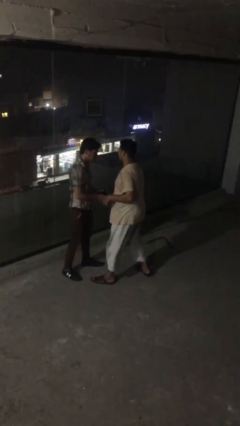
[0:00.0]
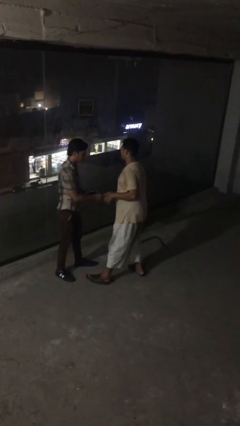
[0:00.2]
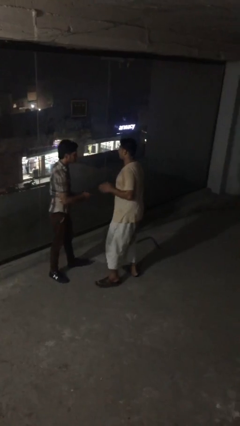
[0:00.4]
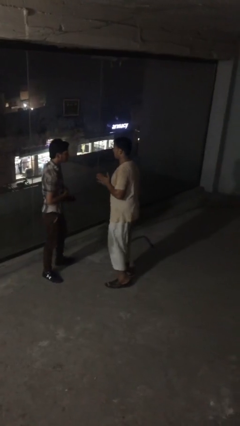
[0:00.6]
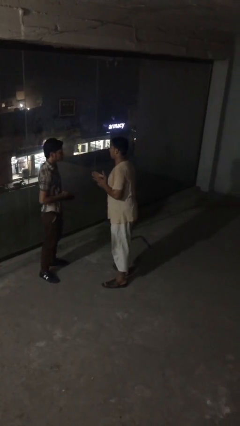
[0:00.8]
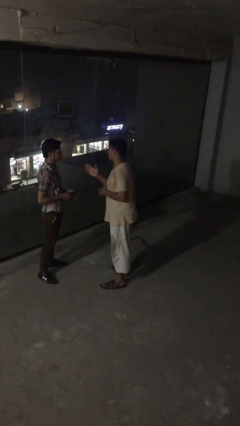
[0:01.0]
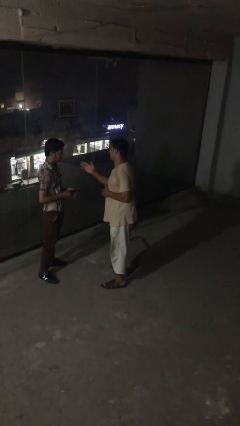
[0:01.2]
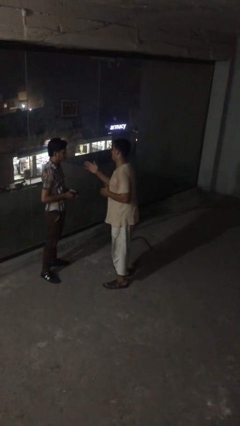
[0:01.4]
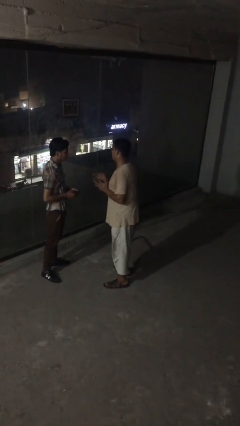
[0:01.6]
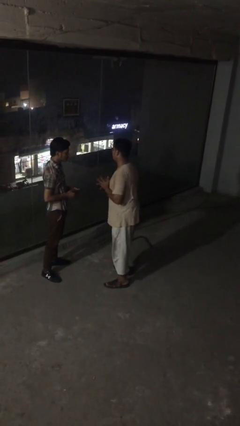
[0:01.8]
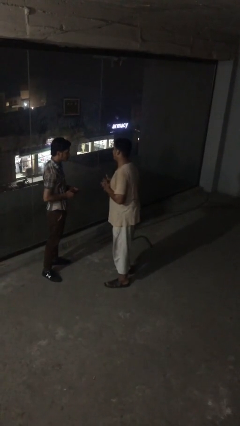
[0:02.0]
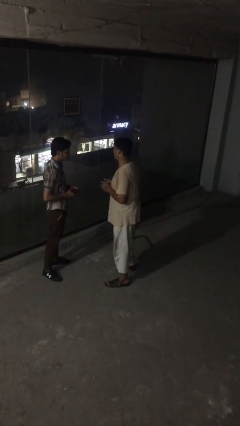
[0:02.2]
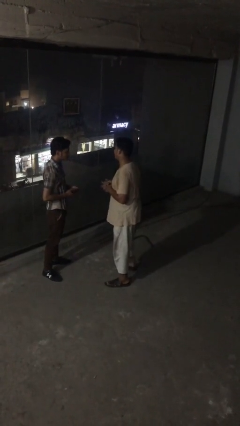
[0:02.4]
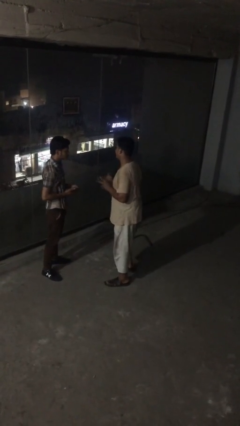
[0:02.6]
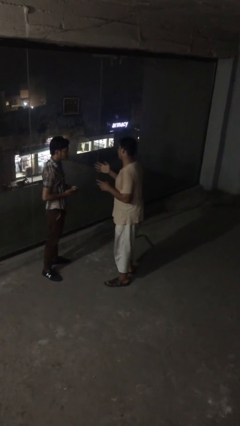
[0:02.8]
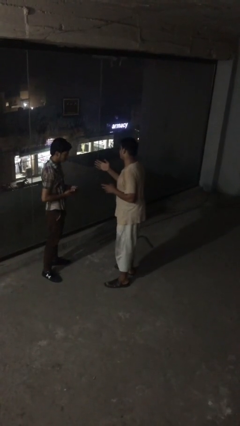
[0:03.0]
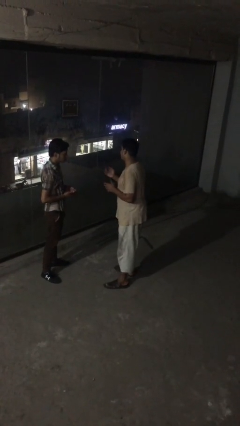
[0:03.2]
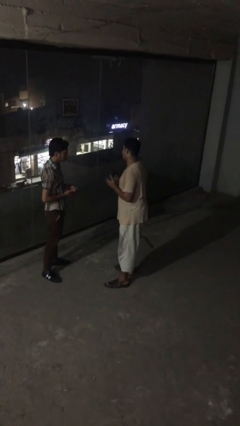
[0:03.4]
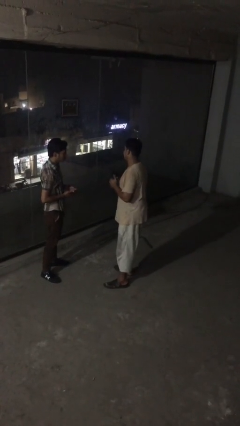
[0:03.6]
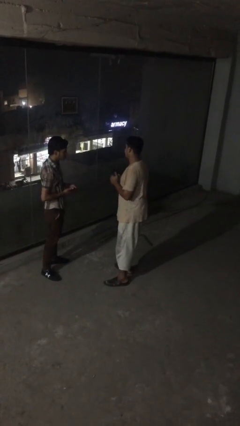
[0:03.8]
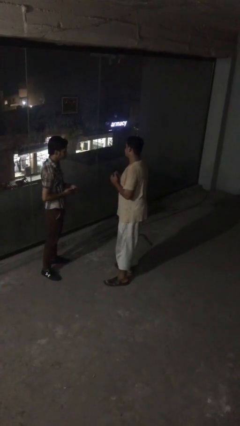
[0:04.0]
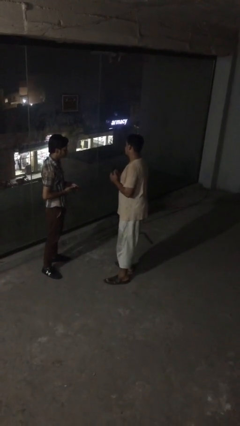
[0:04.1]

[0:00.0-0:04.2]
person talks to person

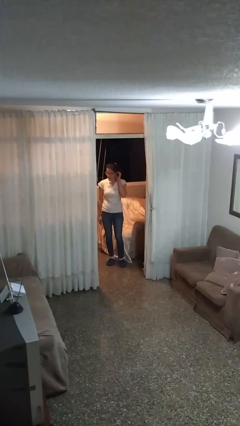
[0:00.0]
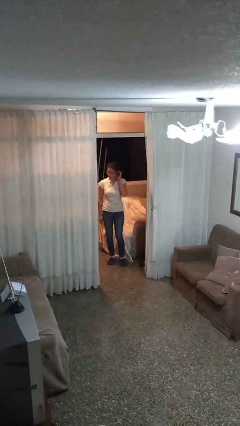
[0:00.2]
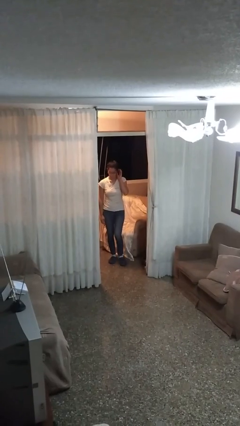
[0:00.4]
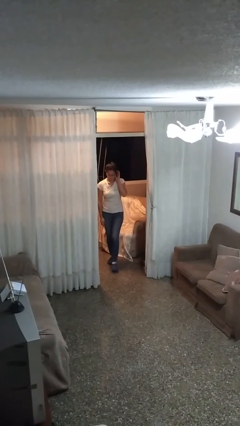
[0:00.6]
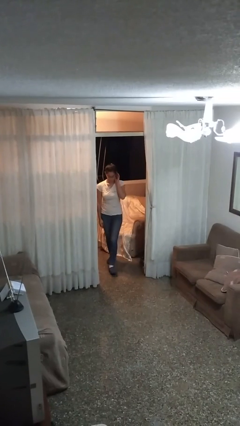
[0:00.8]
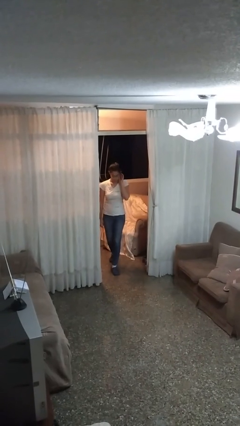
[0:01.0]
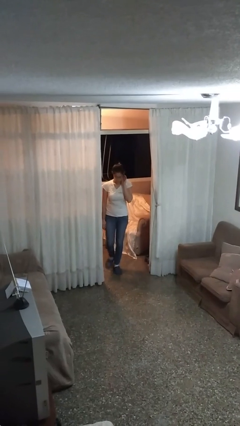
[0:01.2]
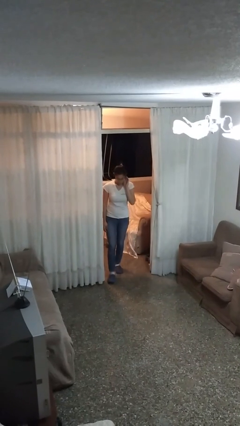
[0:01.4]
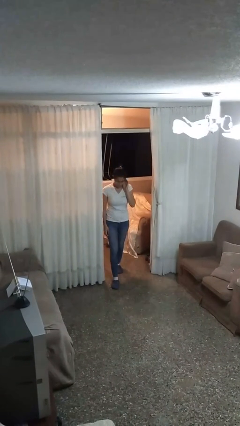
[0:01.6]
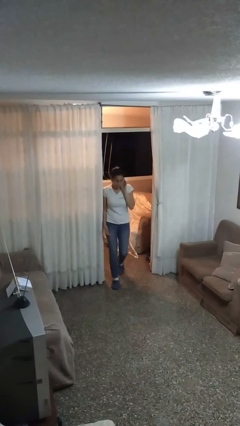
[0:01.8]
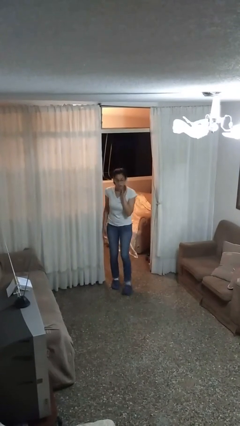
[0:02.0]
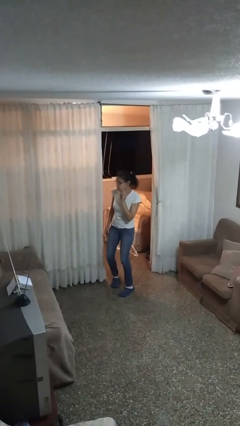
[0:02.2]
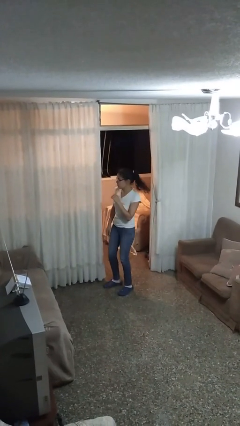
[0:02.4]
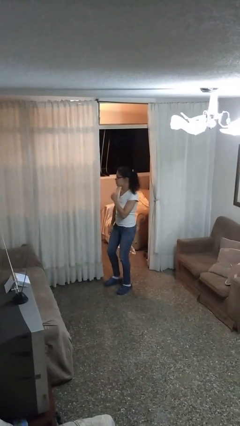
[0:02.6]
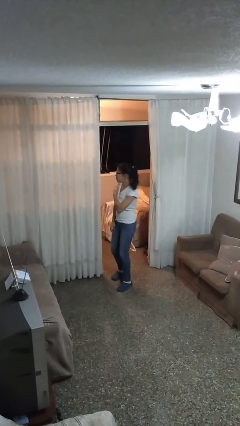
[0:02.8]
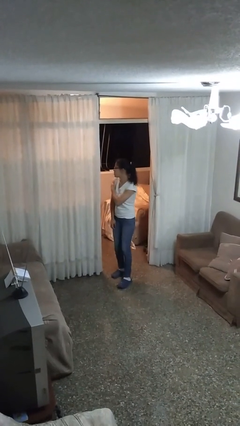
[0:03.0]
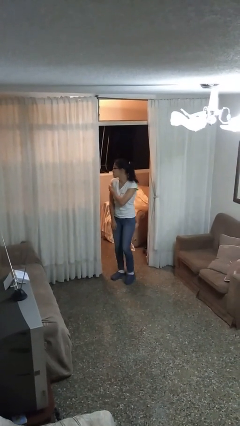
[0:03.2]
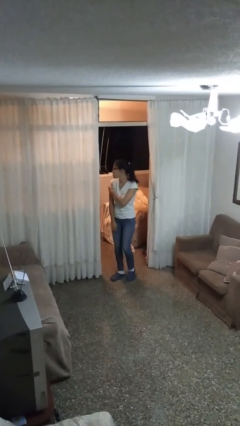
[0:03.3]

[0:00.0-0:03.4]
person bumps into wall

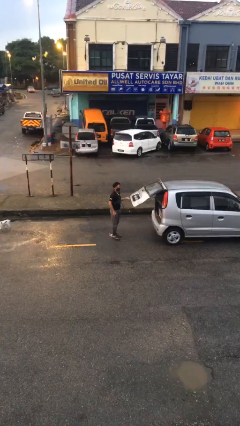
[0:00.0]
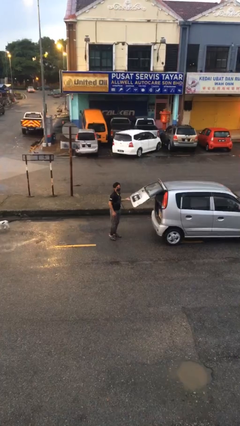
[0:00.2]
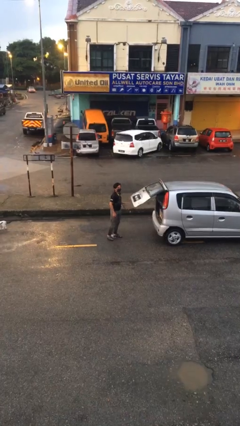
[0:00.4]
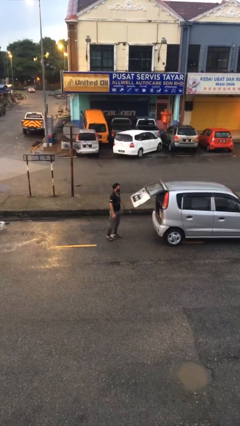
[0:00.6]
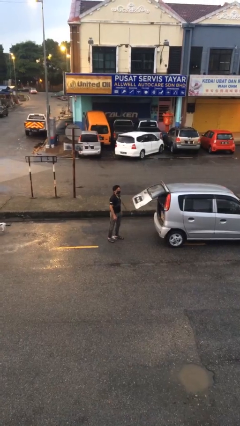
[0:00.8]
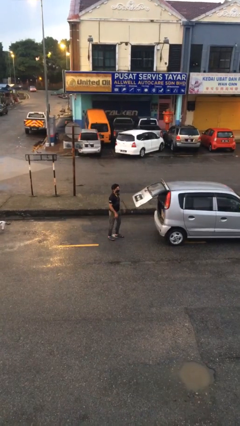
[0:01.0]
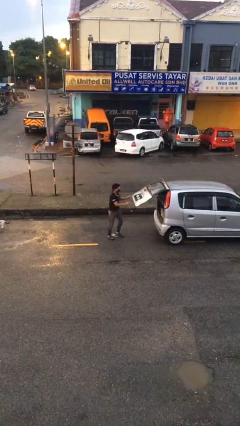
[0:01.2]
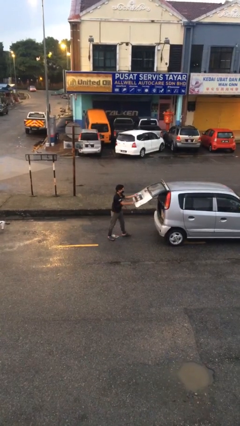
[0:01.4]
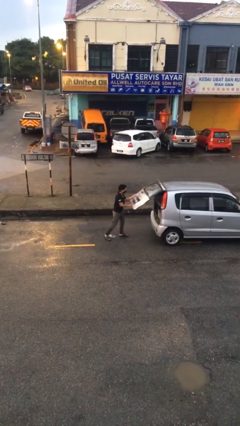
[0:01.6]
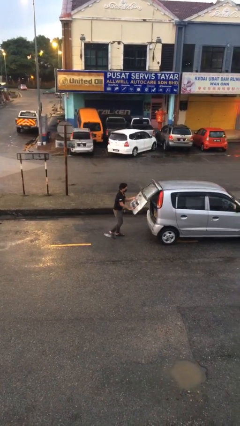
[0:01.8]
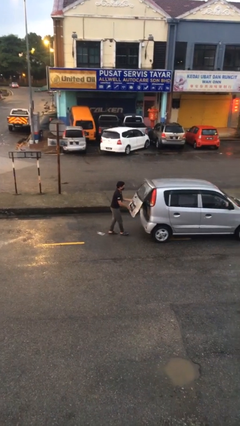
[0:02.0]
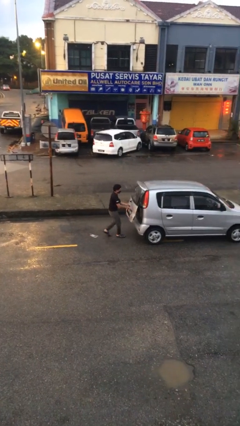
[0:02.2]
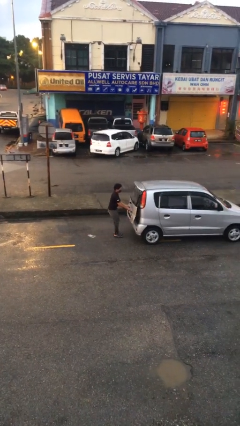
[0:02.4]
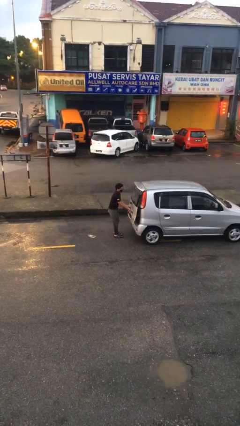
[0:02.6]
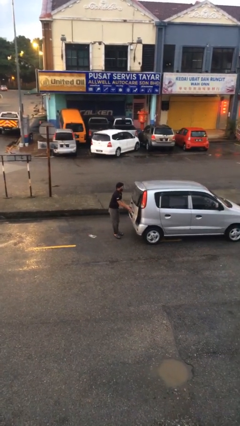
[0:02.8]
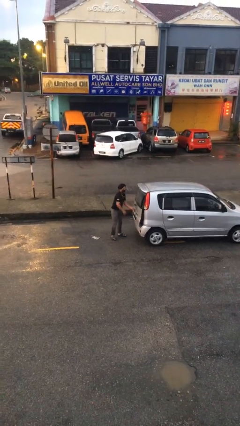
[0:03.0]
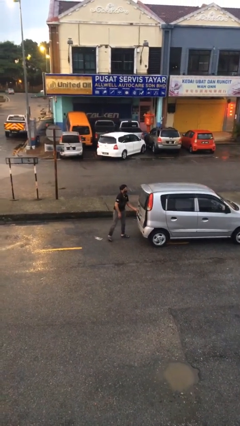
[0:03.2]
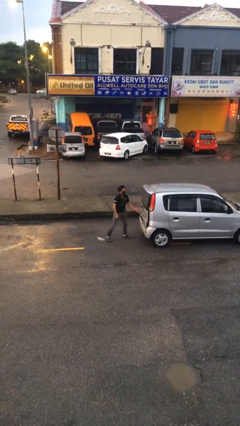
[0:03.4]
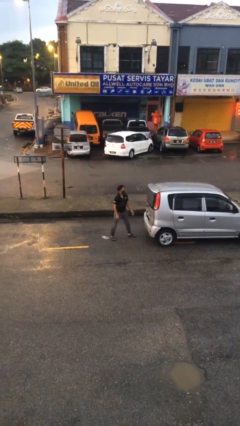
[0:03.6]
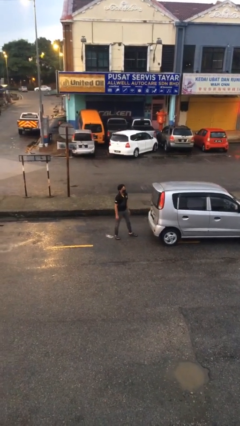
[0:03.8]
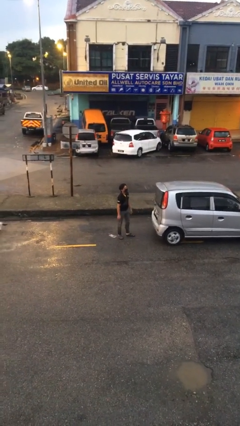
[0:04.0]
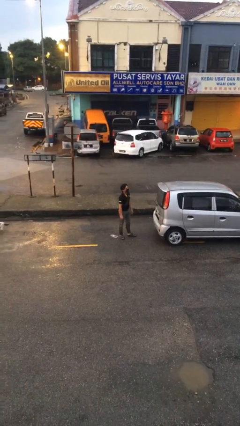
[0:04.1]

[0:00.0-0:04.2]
person closes car trunk

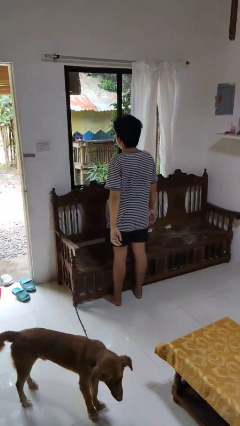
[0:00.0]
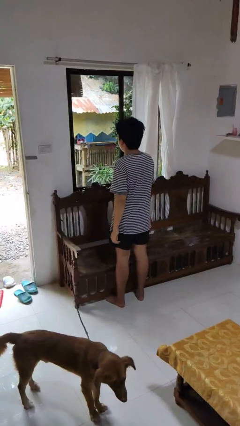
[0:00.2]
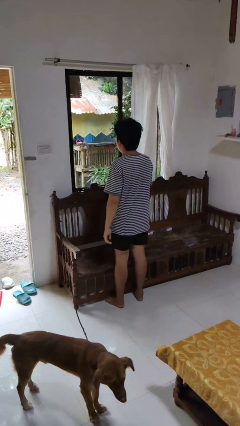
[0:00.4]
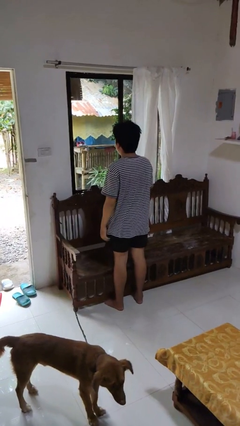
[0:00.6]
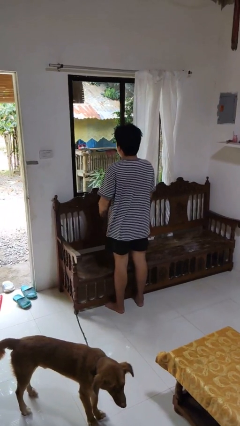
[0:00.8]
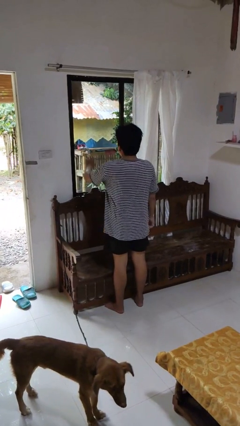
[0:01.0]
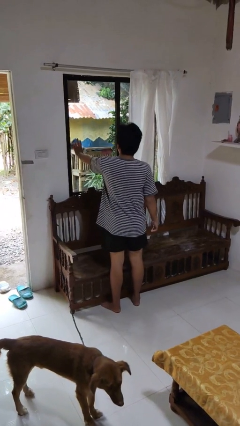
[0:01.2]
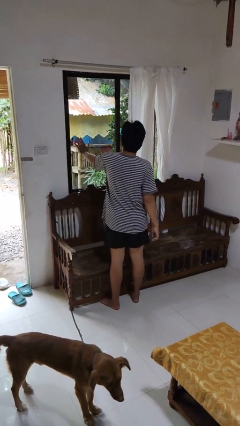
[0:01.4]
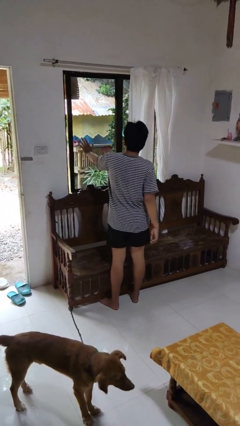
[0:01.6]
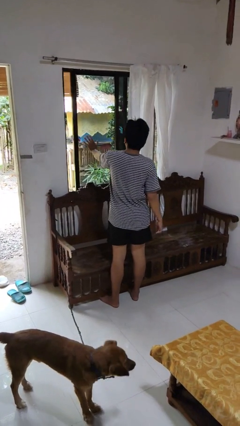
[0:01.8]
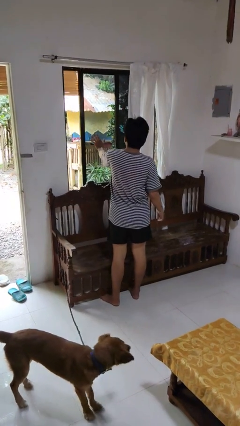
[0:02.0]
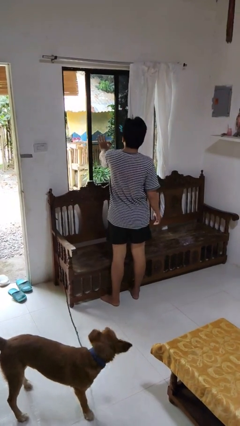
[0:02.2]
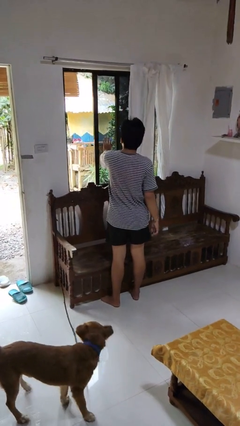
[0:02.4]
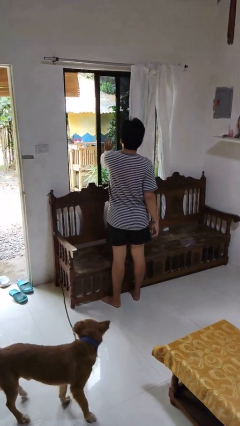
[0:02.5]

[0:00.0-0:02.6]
person opens home window

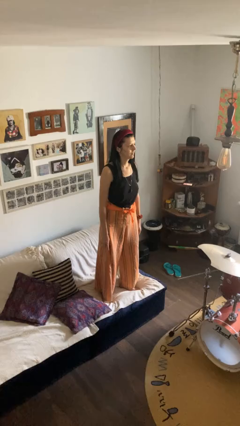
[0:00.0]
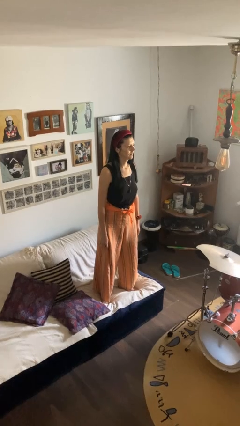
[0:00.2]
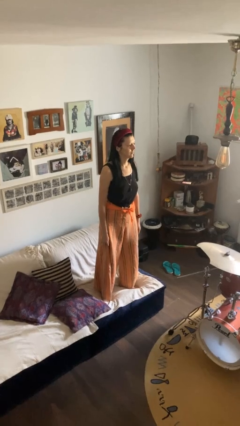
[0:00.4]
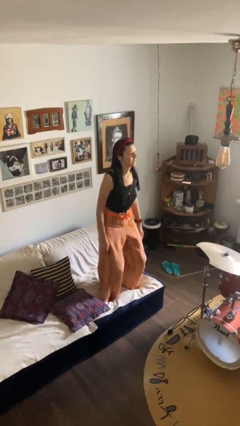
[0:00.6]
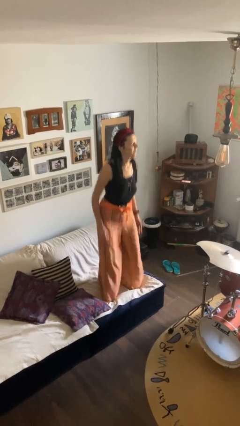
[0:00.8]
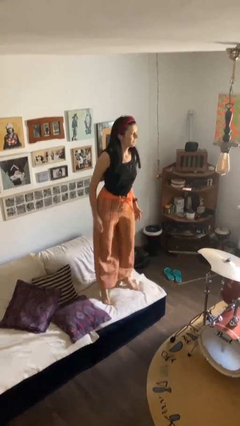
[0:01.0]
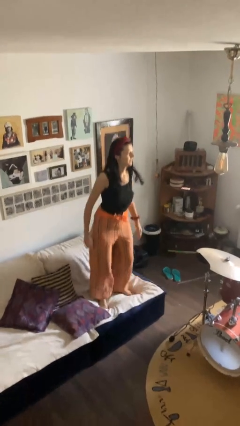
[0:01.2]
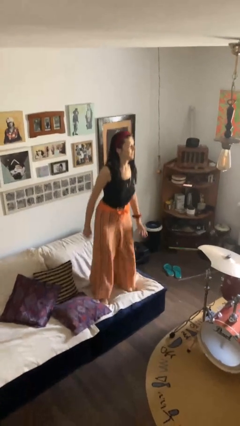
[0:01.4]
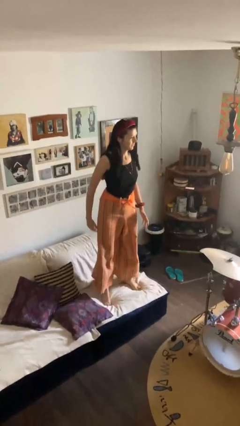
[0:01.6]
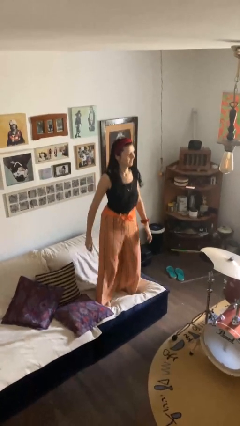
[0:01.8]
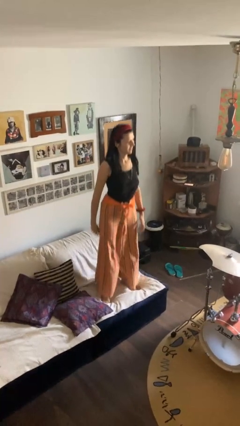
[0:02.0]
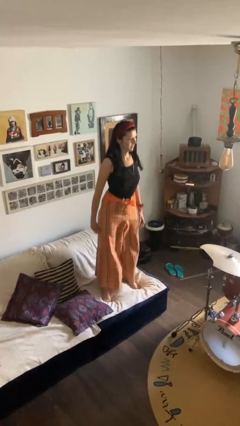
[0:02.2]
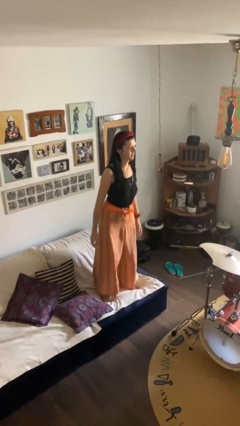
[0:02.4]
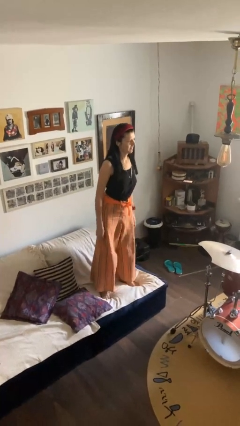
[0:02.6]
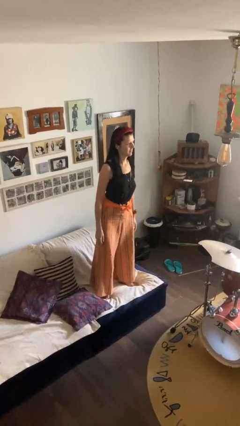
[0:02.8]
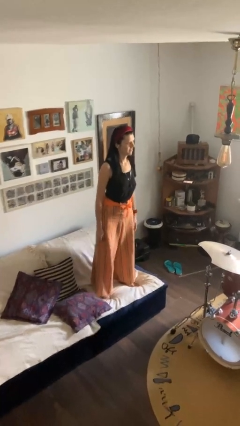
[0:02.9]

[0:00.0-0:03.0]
person jumps on couch

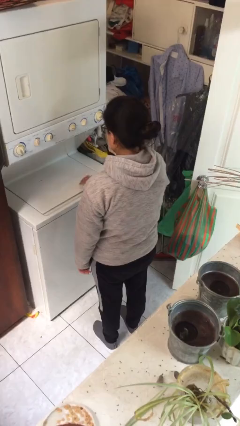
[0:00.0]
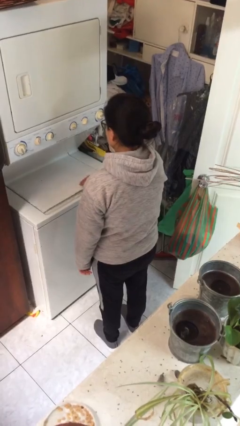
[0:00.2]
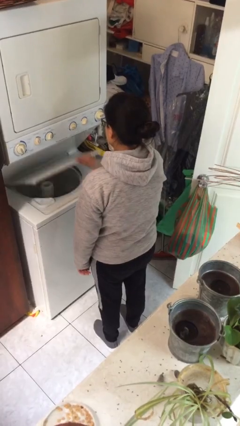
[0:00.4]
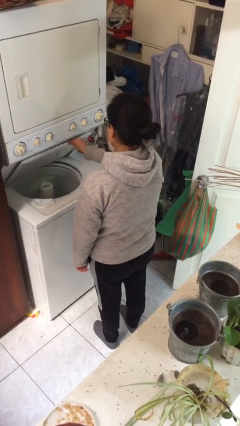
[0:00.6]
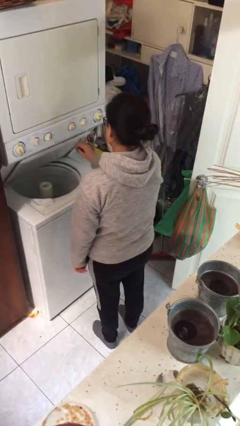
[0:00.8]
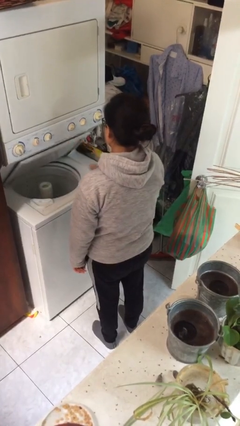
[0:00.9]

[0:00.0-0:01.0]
person opens clothes washer
